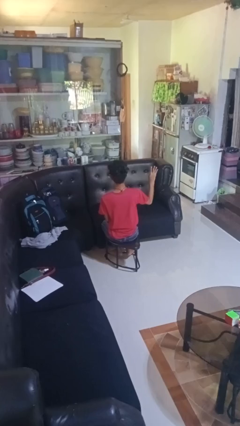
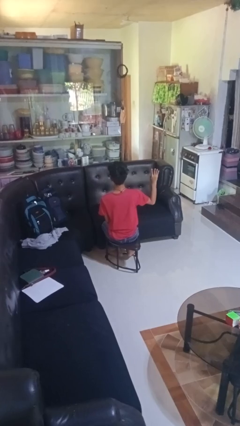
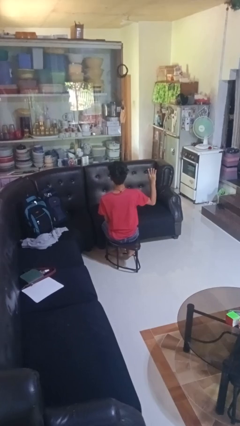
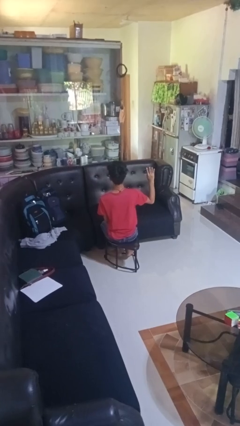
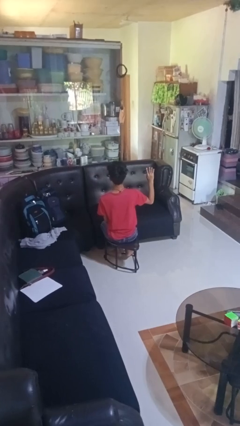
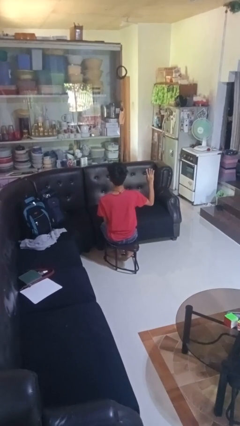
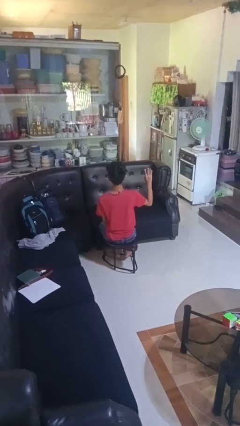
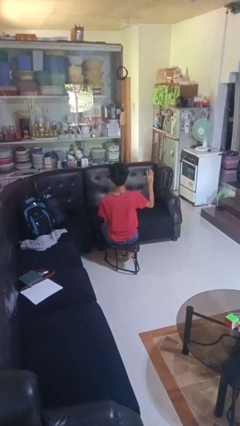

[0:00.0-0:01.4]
person gestures number four

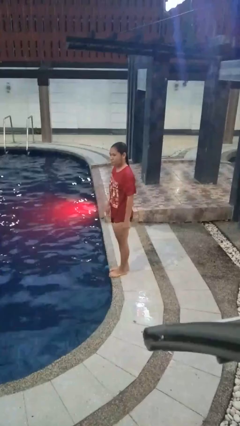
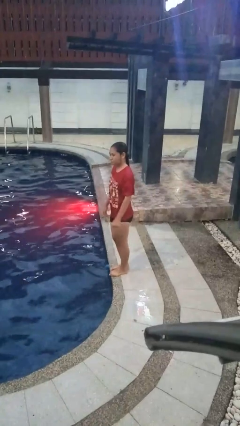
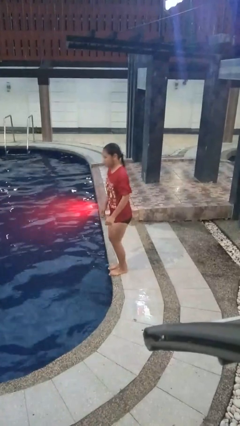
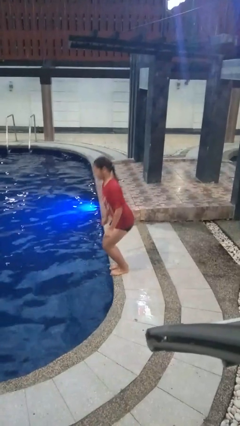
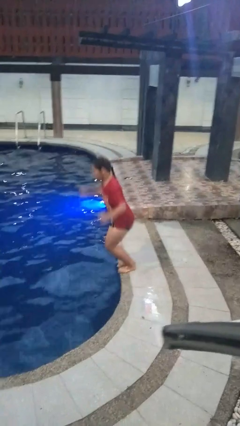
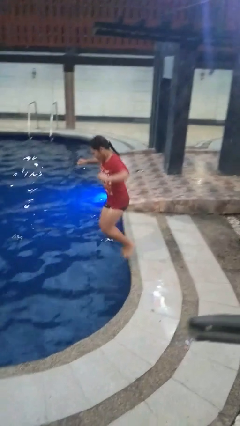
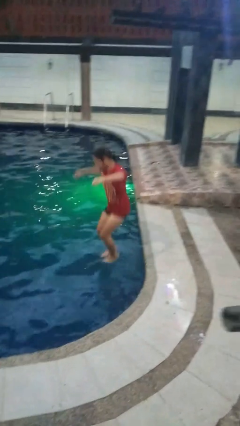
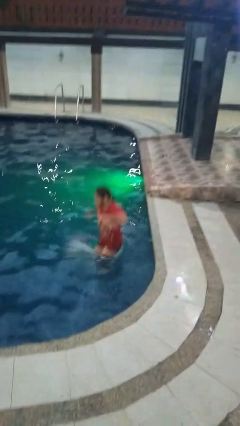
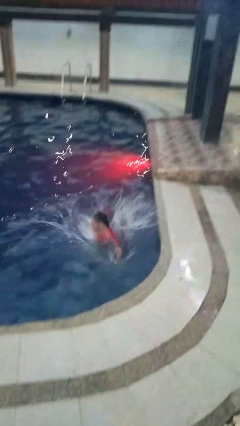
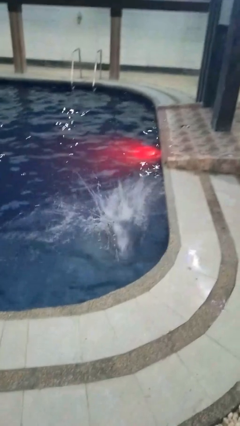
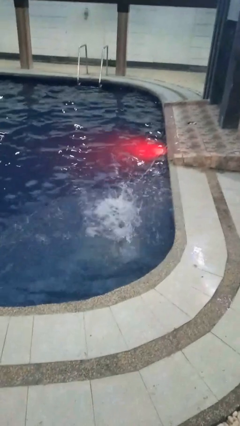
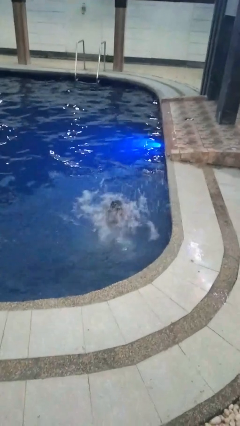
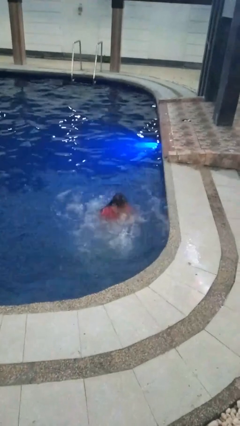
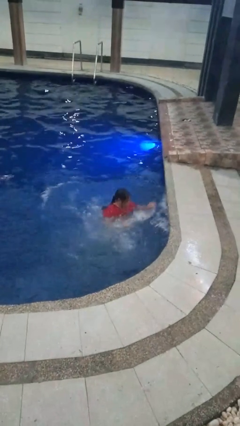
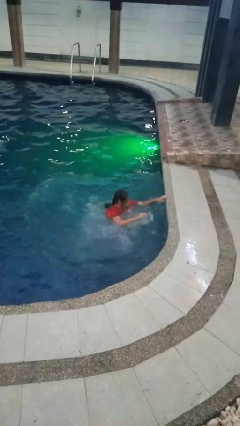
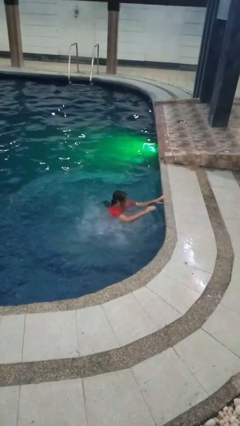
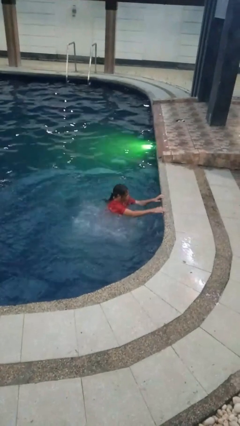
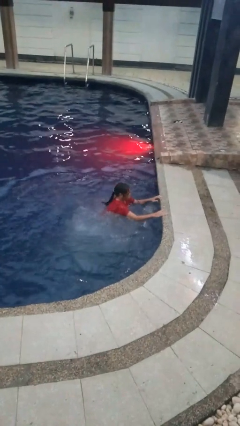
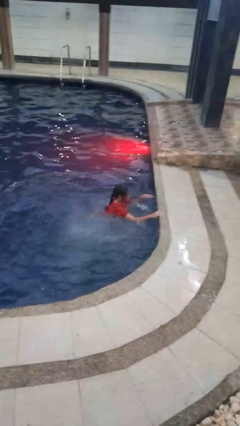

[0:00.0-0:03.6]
person jumps into pool

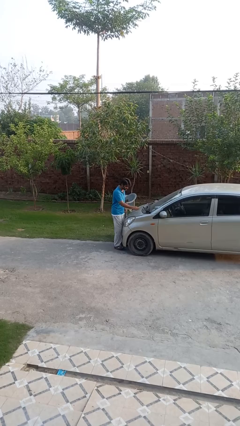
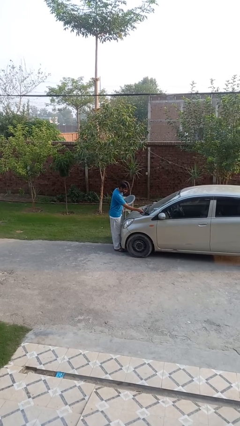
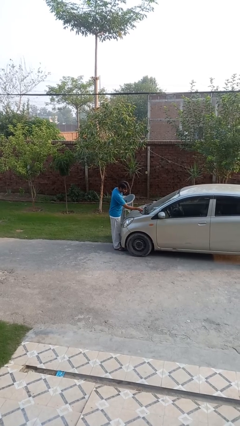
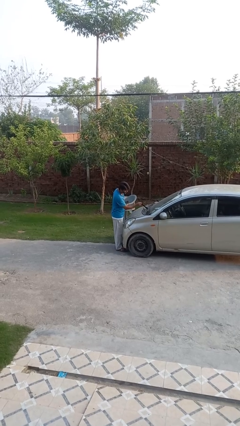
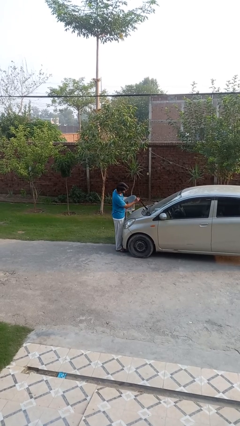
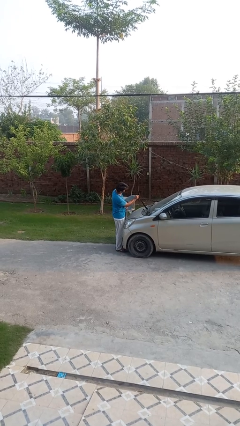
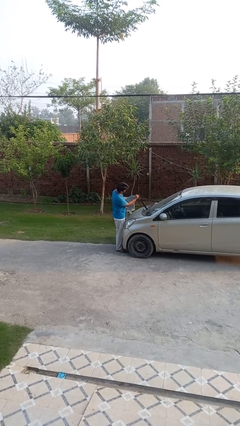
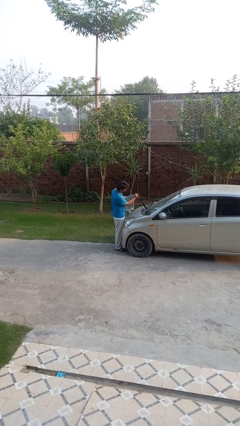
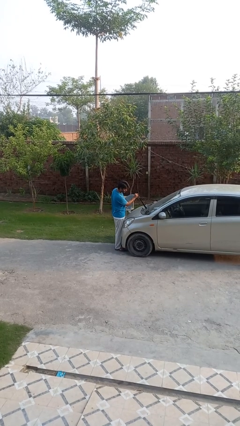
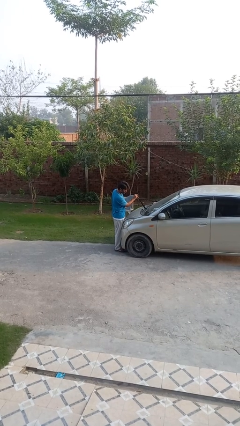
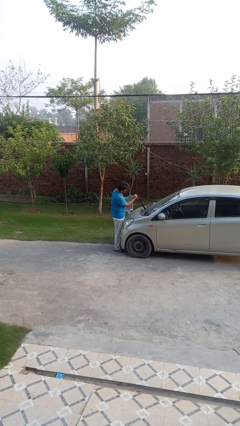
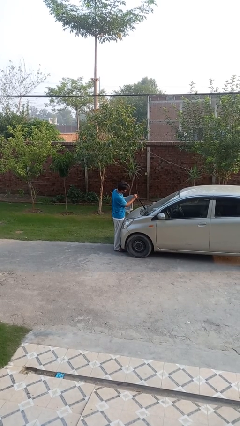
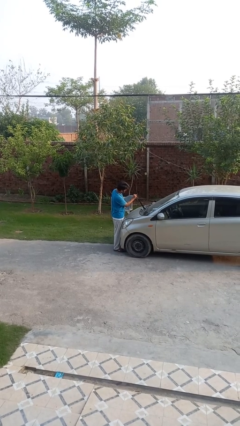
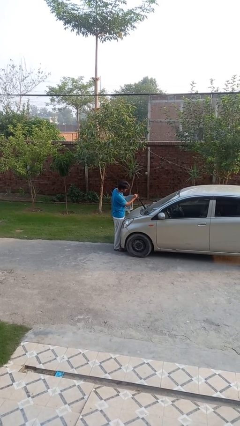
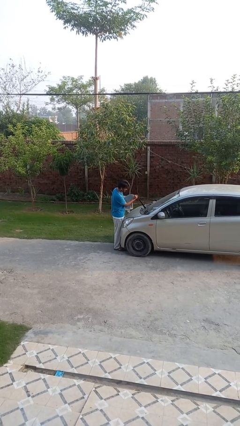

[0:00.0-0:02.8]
person flips up car wipers

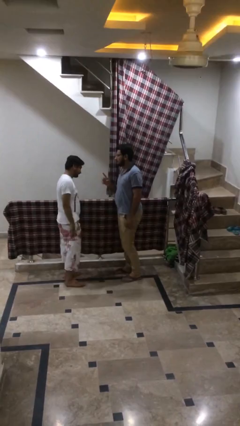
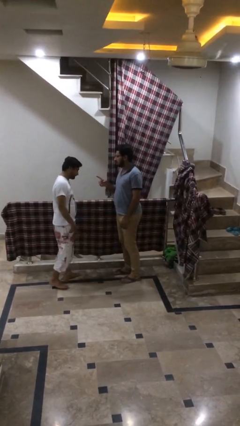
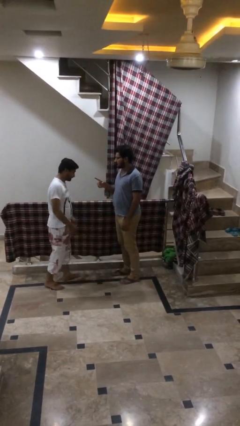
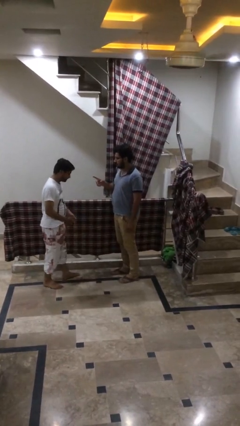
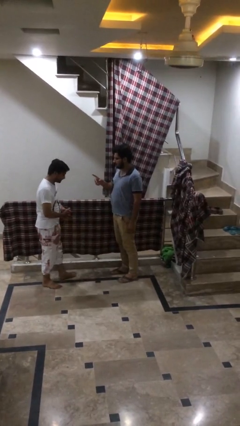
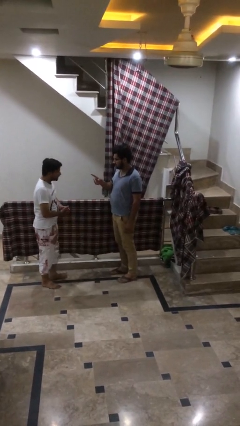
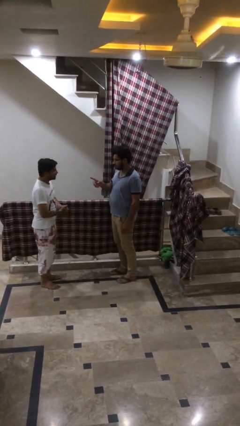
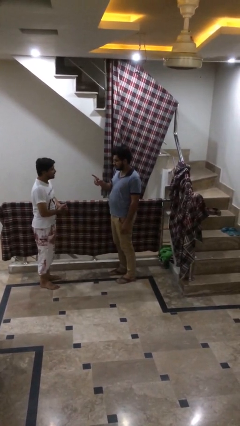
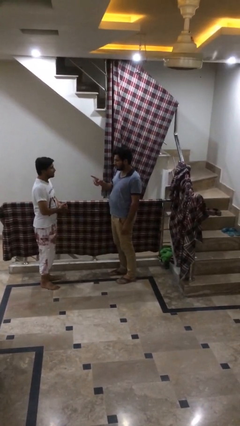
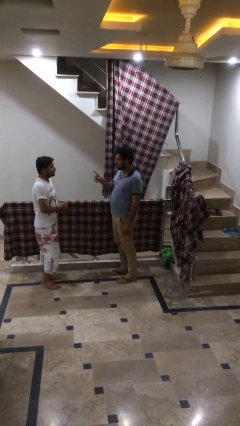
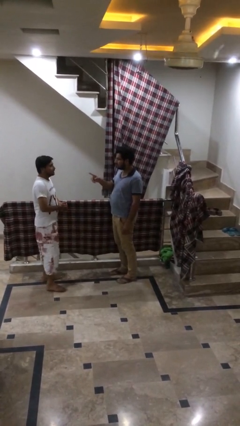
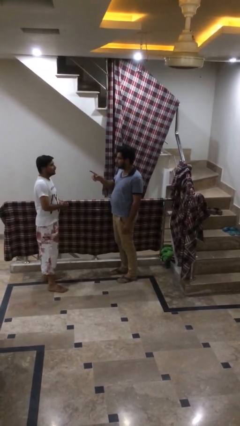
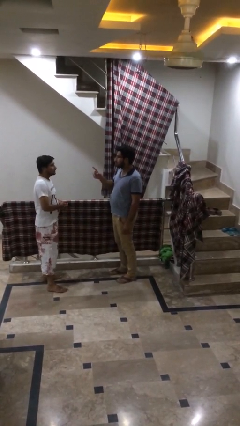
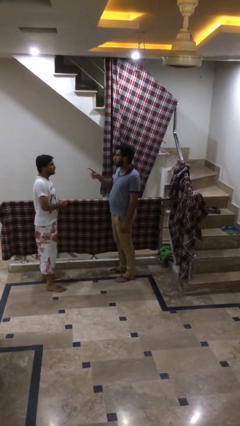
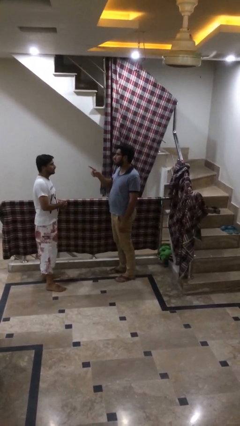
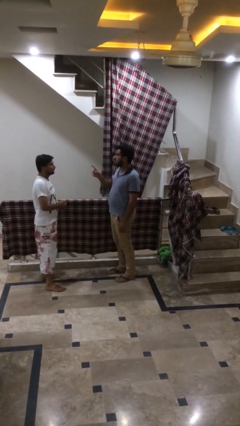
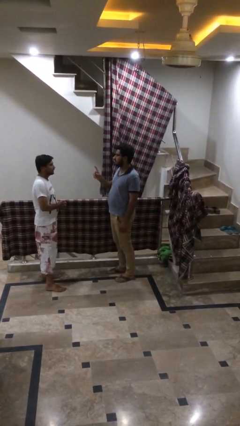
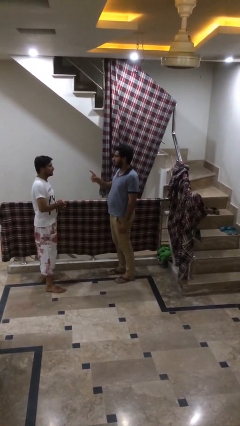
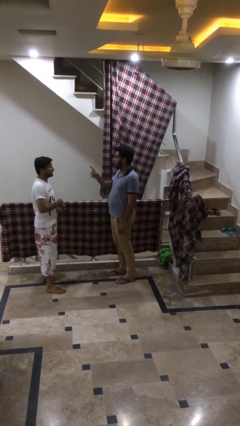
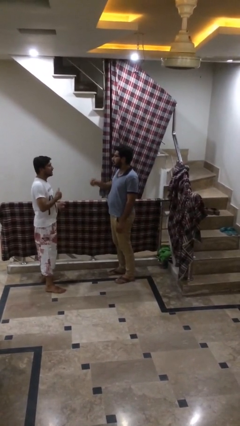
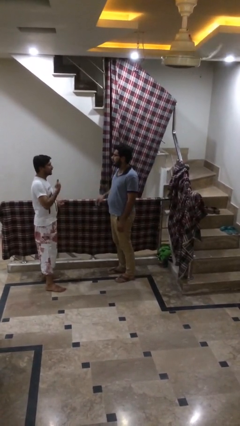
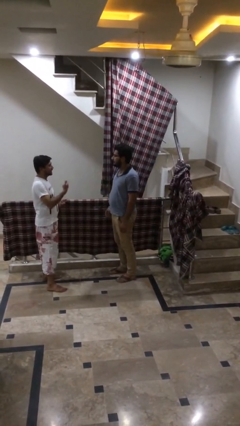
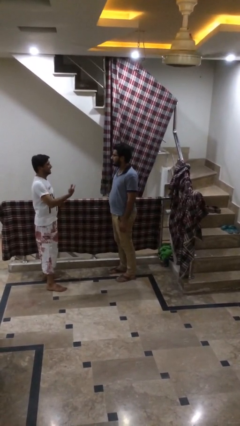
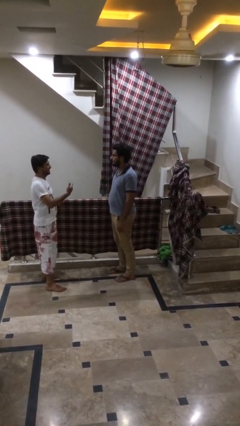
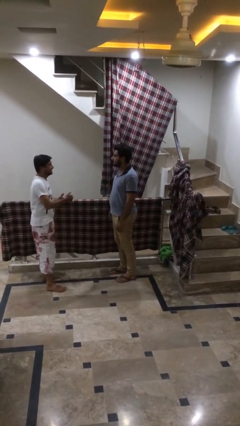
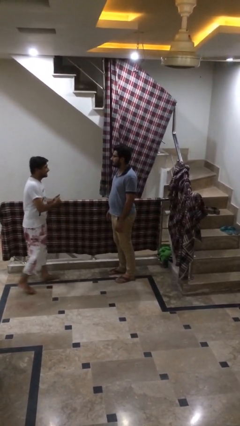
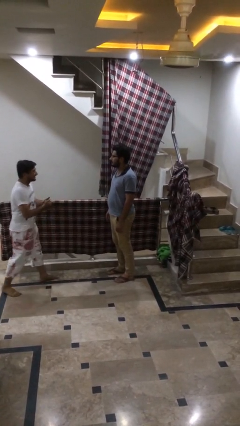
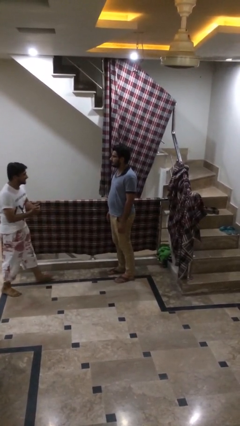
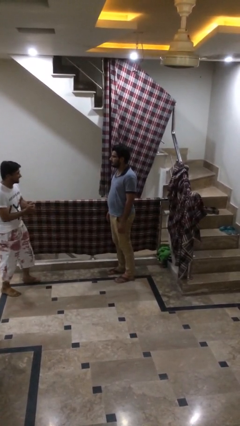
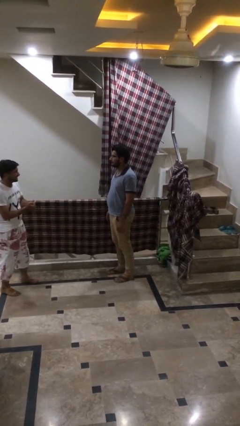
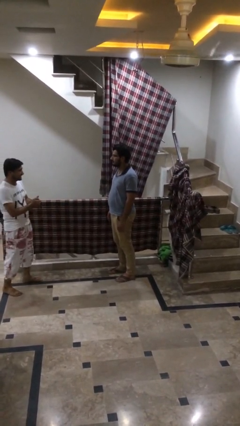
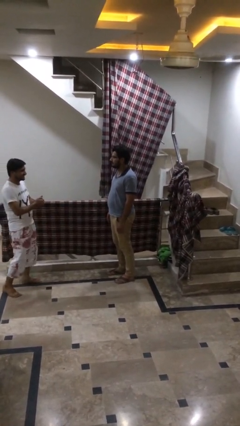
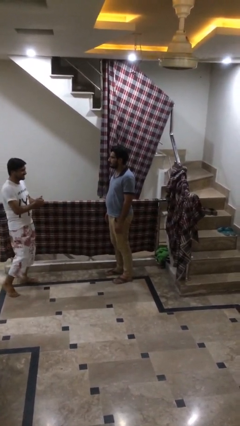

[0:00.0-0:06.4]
person talks to person

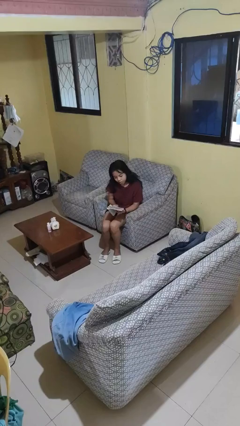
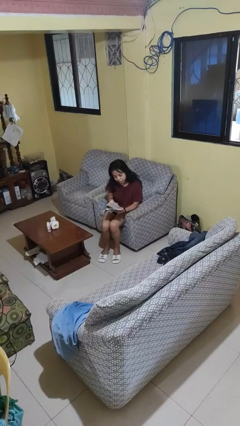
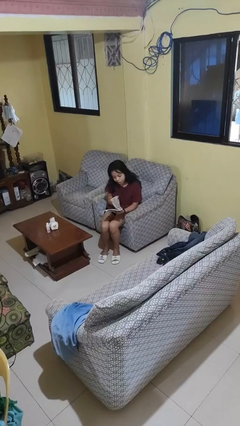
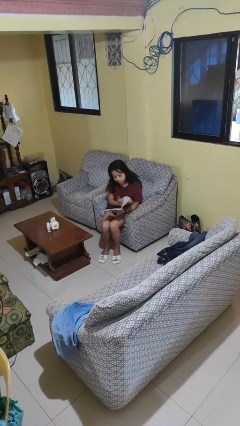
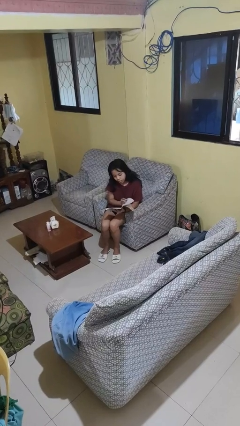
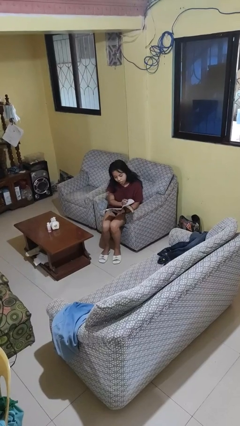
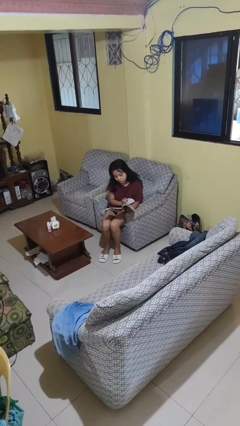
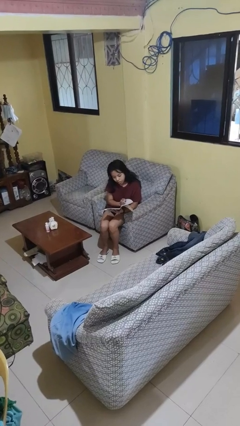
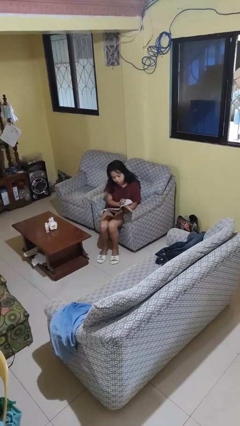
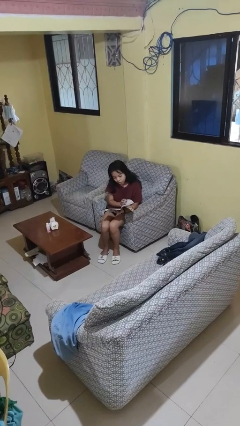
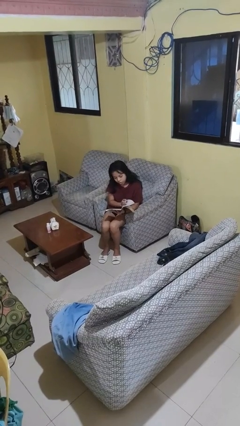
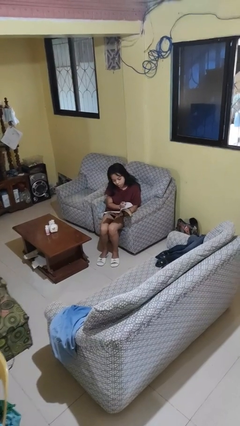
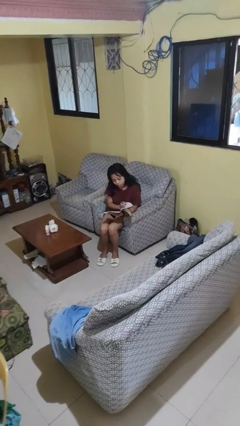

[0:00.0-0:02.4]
person reads magazine

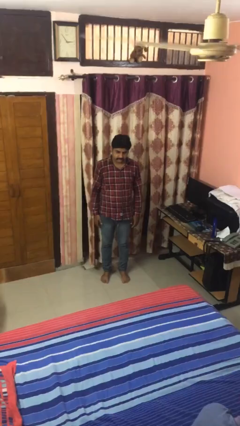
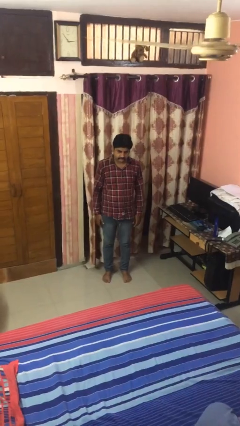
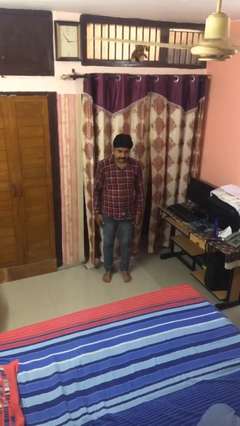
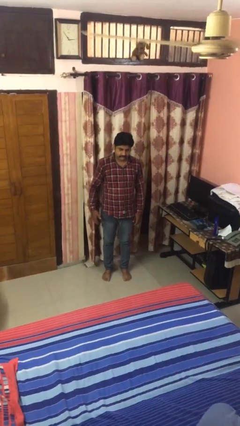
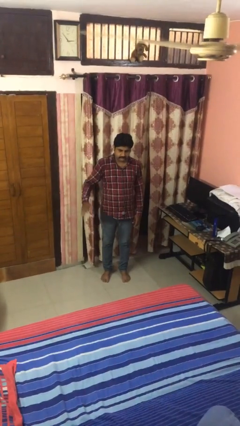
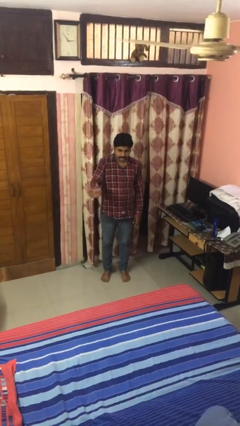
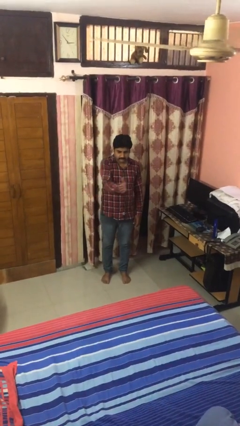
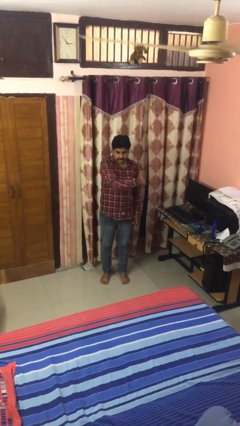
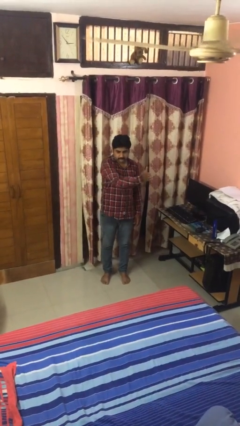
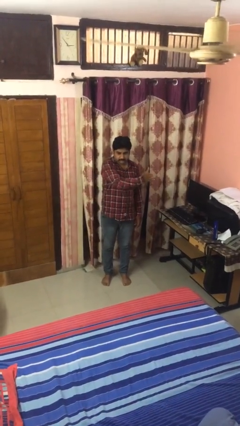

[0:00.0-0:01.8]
person gestures swipe left
